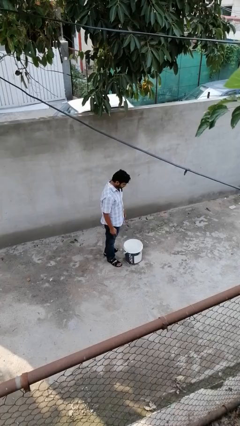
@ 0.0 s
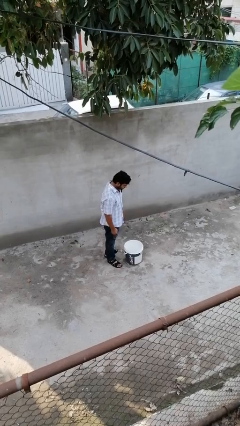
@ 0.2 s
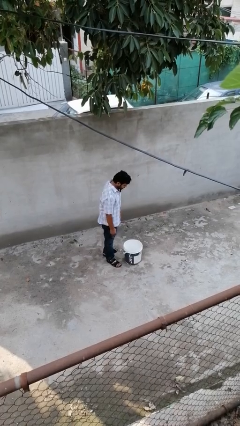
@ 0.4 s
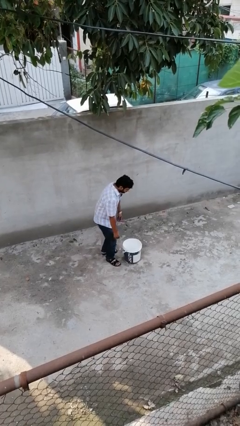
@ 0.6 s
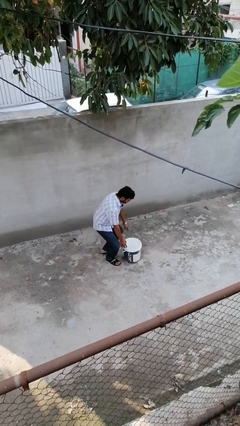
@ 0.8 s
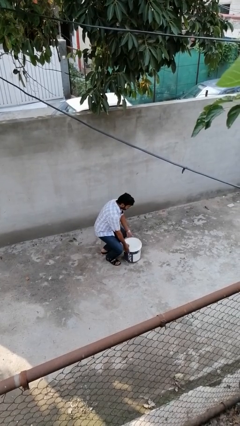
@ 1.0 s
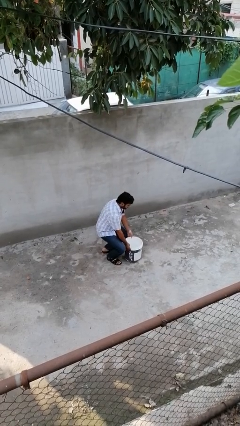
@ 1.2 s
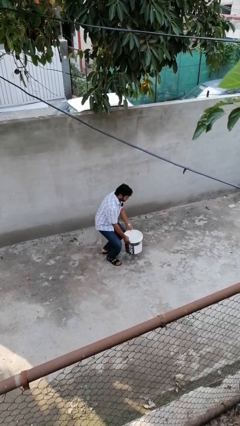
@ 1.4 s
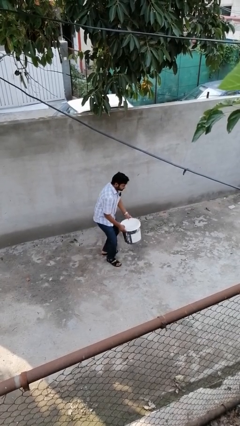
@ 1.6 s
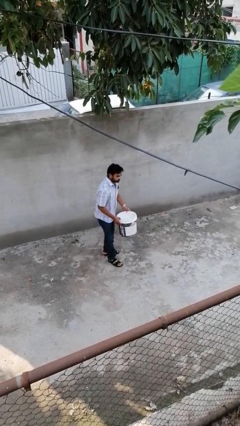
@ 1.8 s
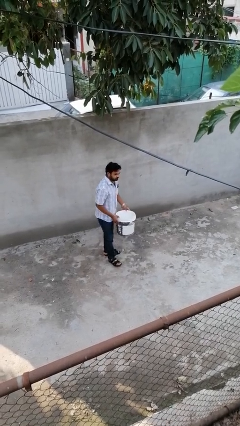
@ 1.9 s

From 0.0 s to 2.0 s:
person picks up object from floor

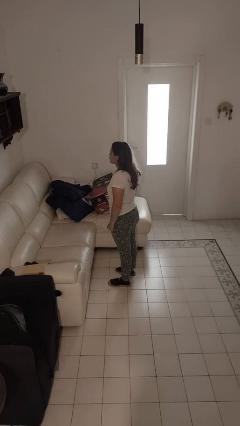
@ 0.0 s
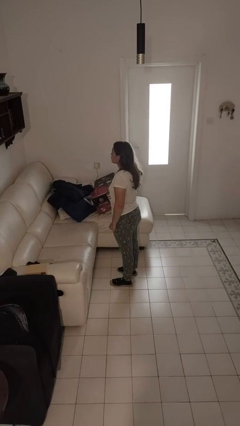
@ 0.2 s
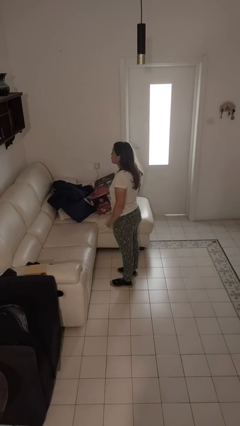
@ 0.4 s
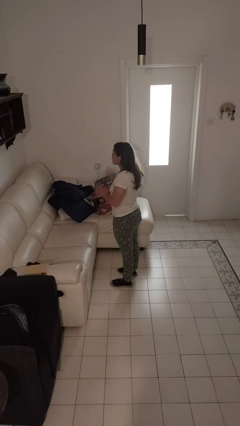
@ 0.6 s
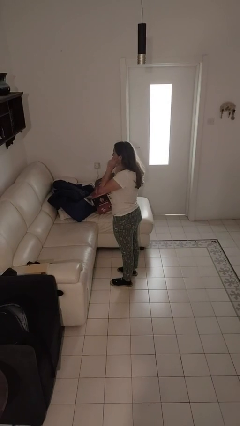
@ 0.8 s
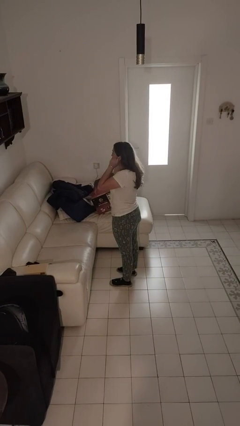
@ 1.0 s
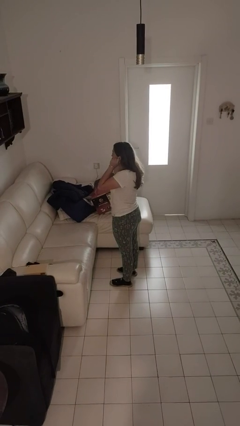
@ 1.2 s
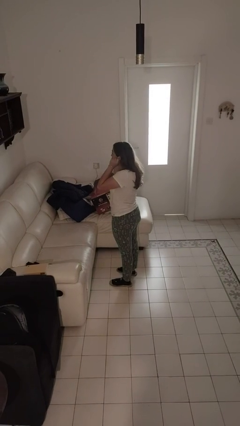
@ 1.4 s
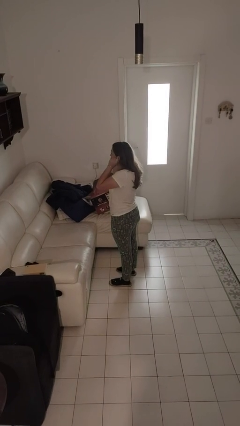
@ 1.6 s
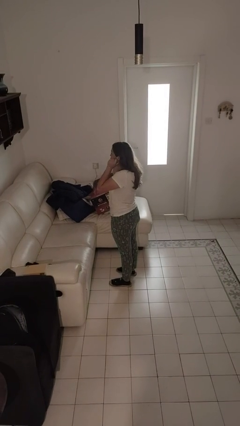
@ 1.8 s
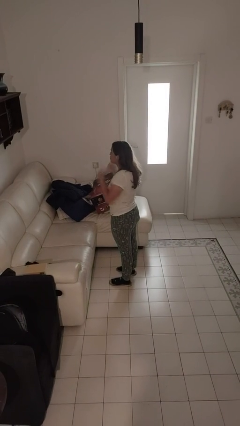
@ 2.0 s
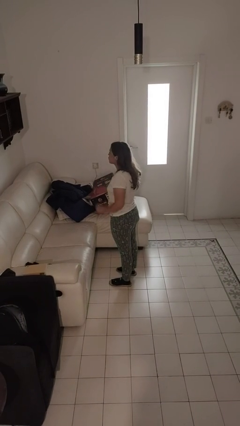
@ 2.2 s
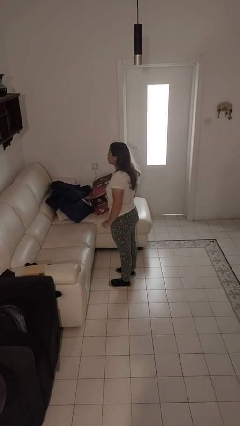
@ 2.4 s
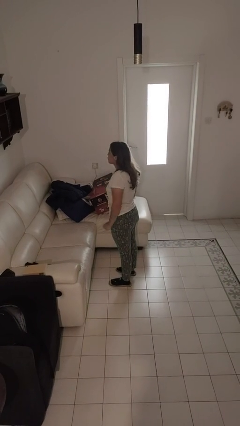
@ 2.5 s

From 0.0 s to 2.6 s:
person touches earlobe

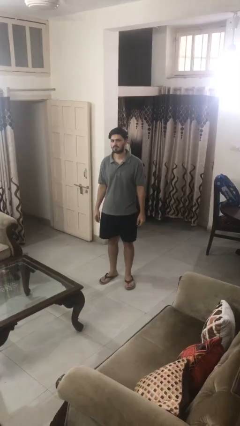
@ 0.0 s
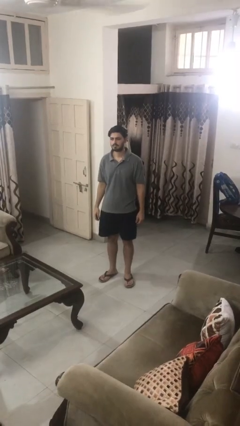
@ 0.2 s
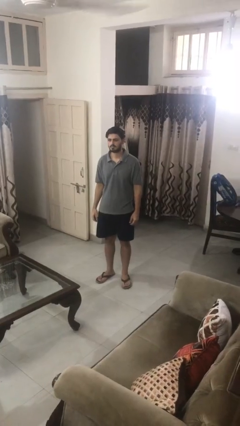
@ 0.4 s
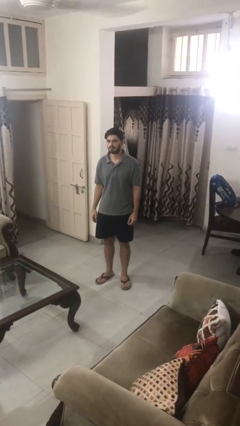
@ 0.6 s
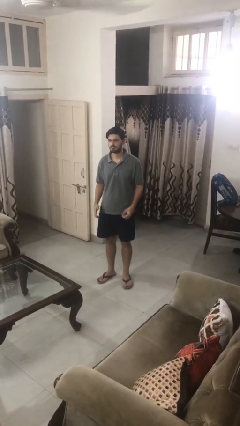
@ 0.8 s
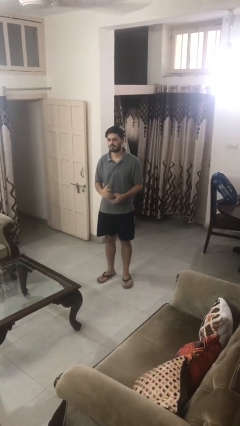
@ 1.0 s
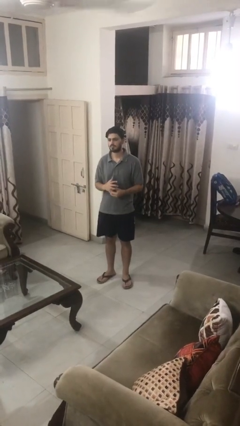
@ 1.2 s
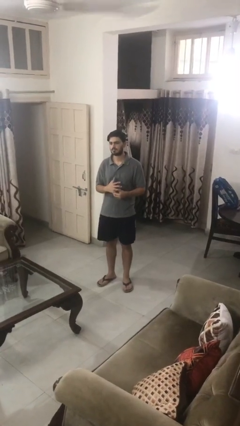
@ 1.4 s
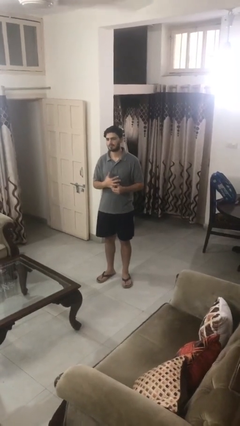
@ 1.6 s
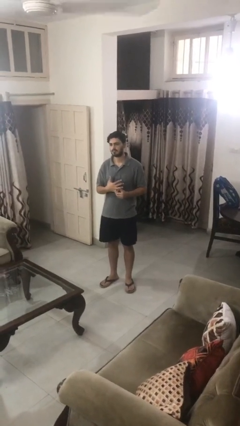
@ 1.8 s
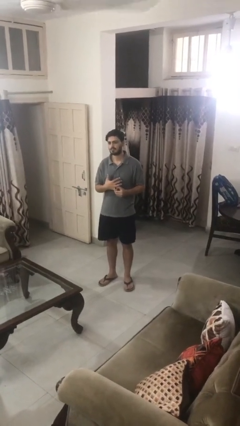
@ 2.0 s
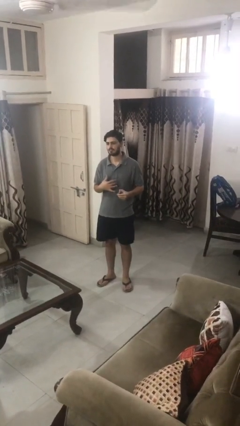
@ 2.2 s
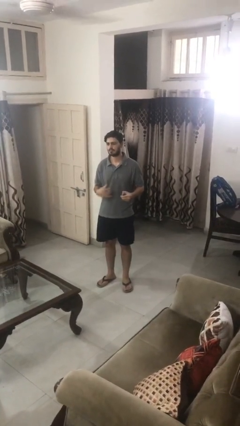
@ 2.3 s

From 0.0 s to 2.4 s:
person takes off ring

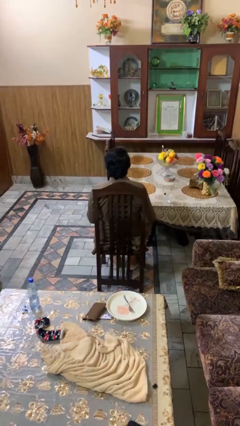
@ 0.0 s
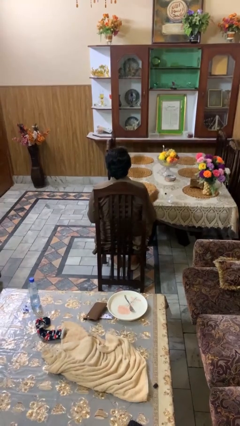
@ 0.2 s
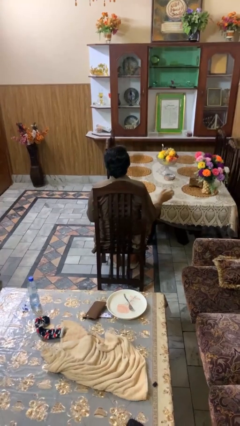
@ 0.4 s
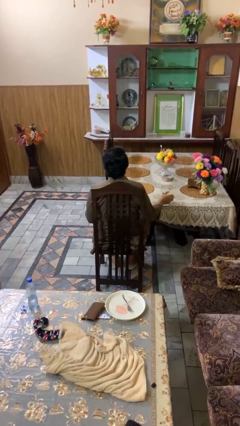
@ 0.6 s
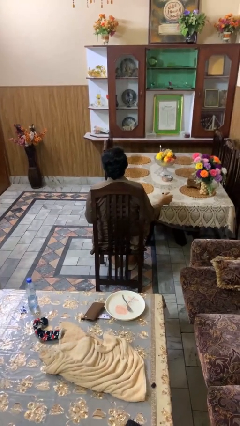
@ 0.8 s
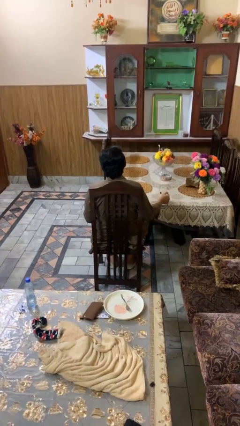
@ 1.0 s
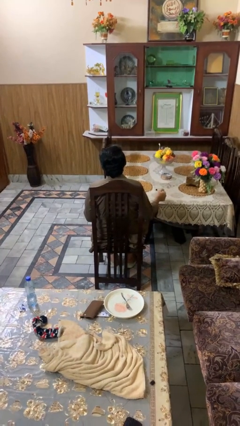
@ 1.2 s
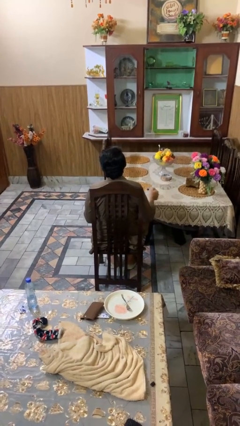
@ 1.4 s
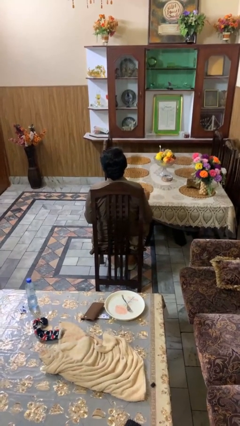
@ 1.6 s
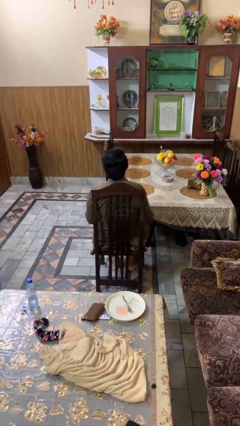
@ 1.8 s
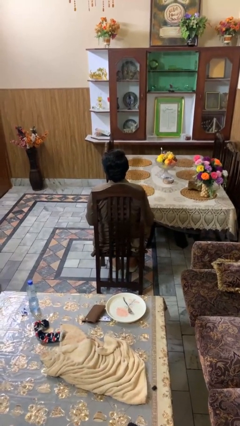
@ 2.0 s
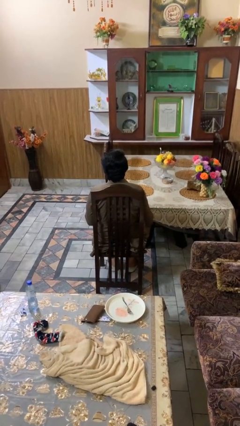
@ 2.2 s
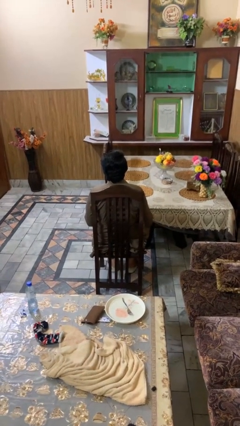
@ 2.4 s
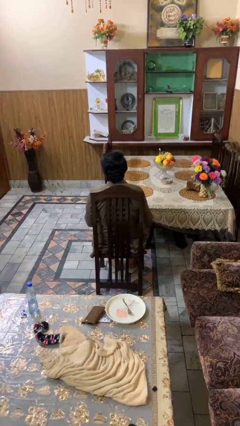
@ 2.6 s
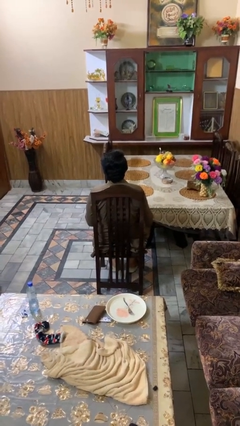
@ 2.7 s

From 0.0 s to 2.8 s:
person picks up object from table

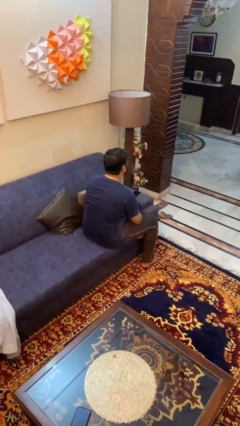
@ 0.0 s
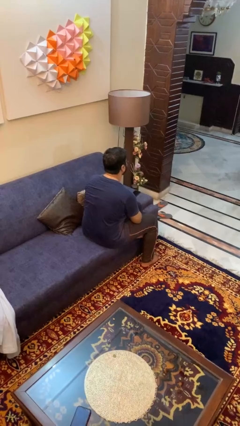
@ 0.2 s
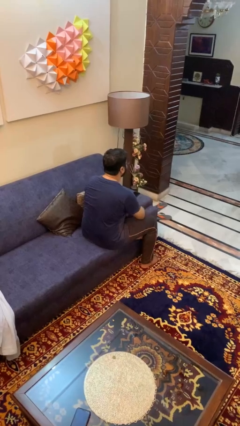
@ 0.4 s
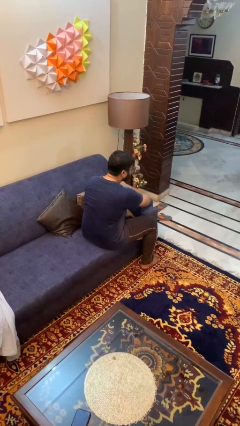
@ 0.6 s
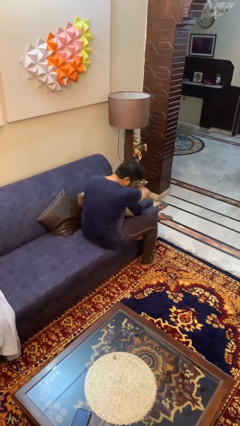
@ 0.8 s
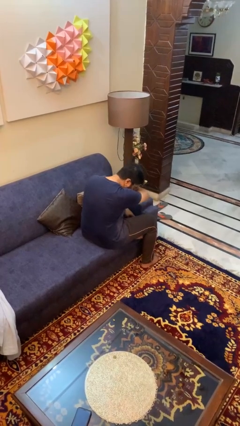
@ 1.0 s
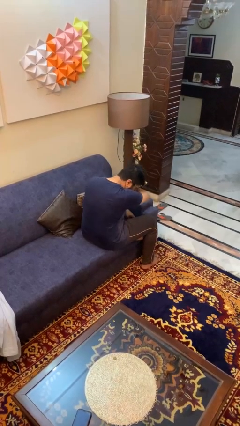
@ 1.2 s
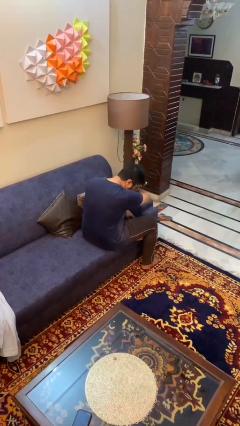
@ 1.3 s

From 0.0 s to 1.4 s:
person sneezes into arm

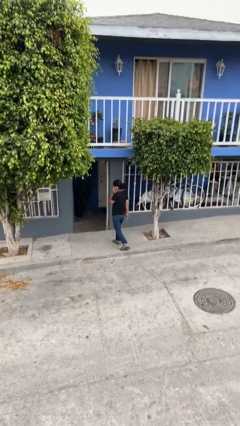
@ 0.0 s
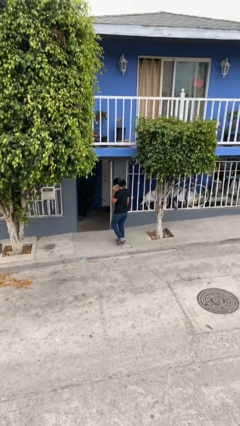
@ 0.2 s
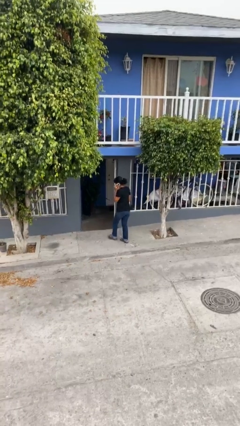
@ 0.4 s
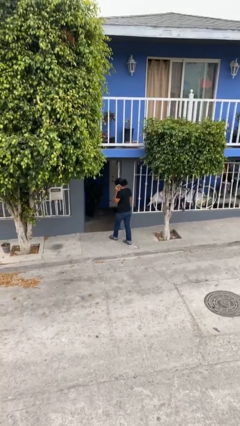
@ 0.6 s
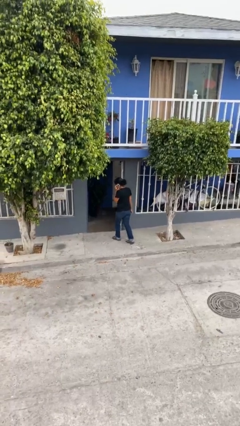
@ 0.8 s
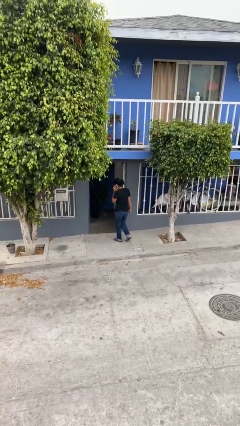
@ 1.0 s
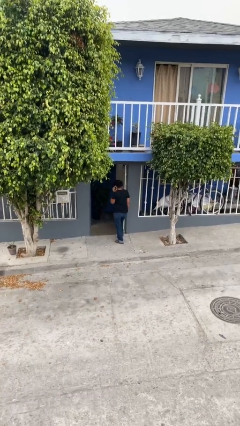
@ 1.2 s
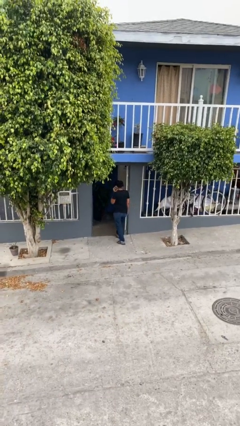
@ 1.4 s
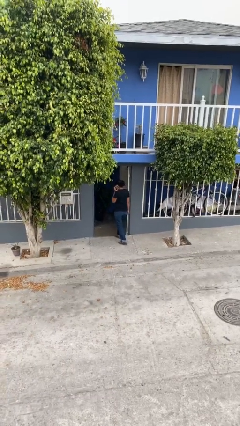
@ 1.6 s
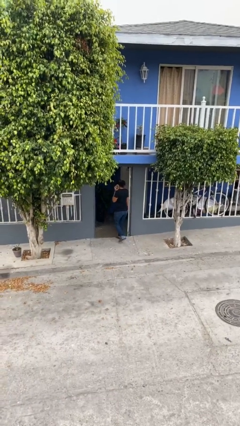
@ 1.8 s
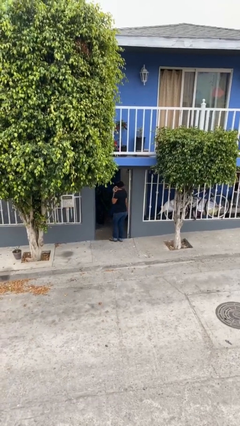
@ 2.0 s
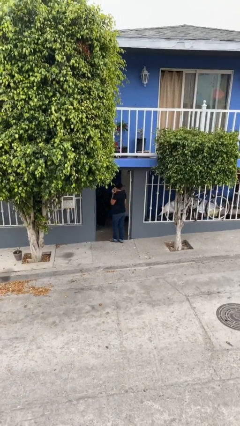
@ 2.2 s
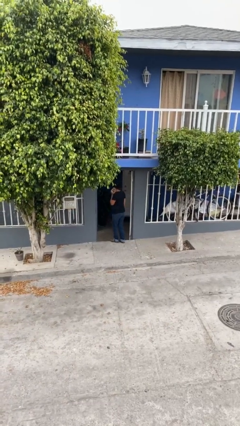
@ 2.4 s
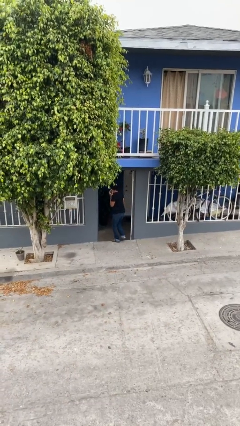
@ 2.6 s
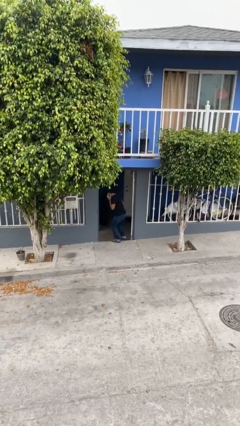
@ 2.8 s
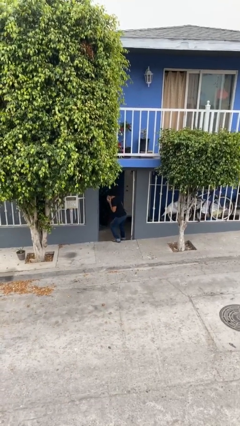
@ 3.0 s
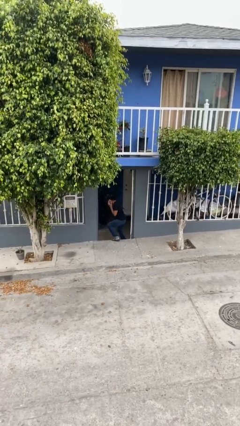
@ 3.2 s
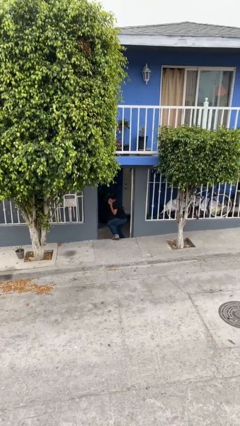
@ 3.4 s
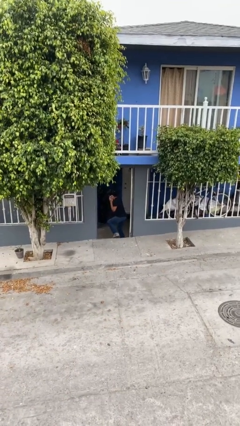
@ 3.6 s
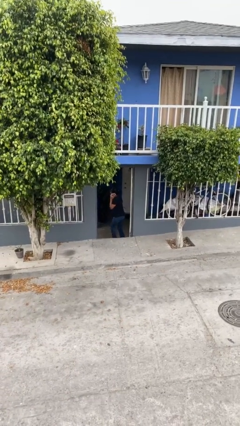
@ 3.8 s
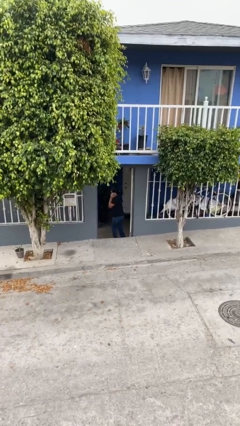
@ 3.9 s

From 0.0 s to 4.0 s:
person exits scene through structure

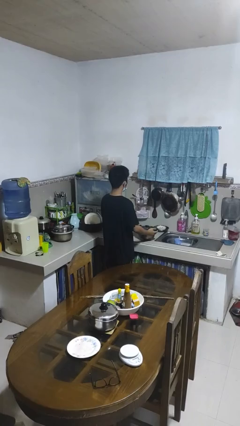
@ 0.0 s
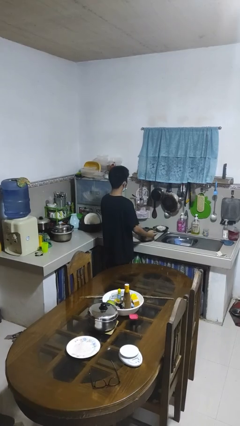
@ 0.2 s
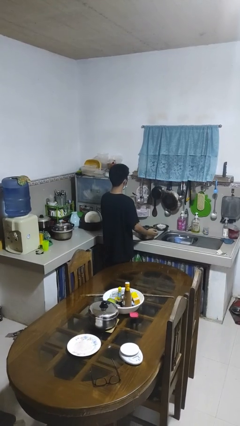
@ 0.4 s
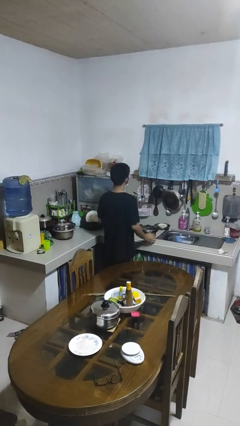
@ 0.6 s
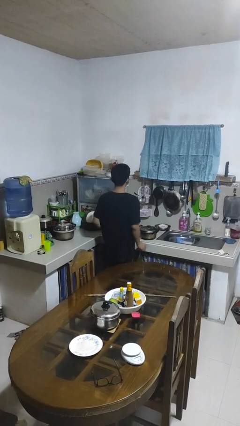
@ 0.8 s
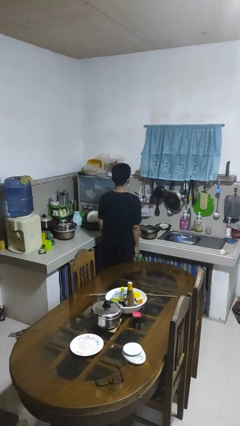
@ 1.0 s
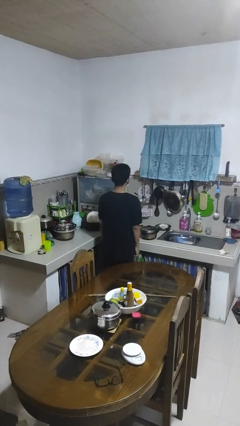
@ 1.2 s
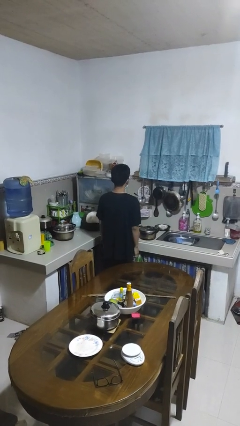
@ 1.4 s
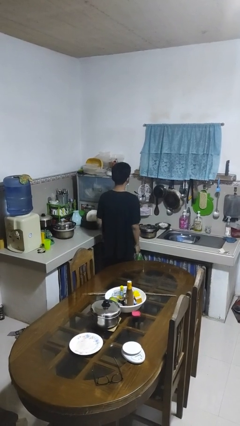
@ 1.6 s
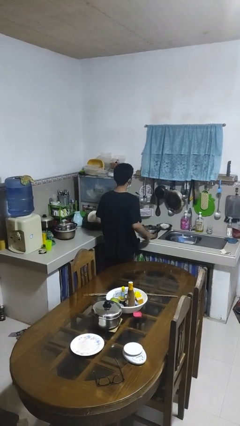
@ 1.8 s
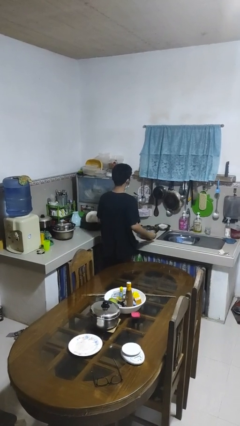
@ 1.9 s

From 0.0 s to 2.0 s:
person puts down object on countertop
